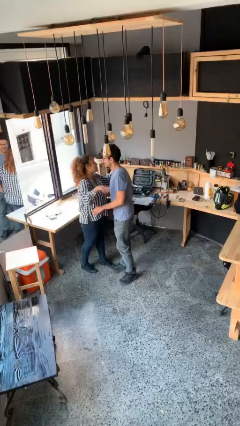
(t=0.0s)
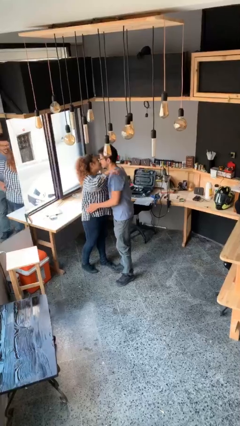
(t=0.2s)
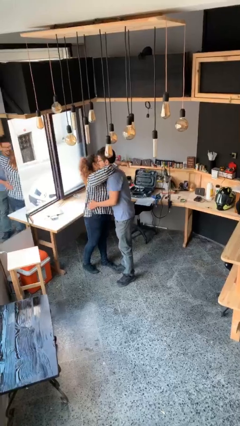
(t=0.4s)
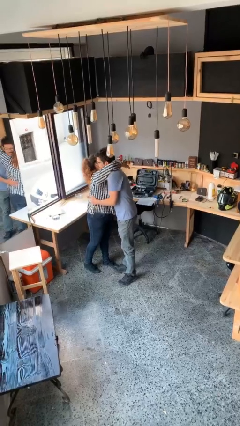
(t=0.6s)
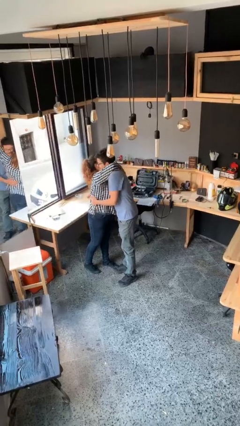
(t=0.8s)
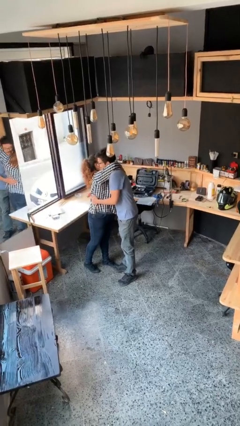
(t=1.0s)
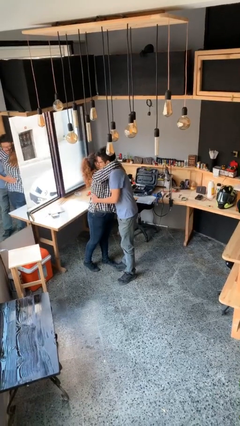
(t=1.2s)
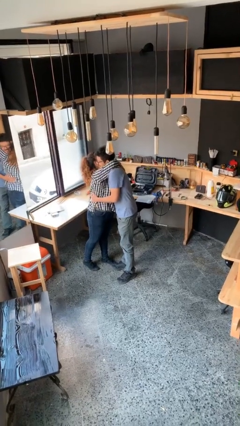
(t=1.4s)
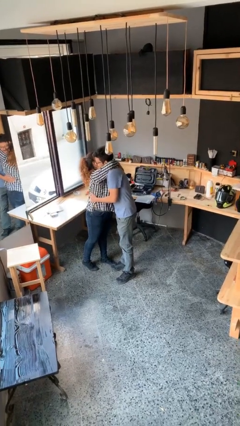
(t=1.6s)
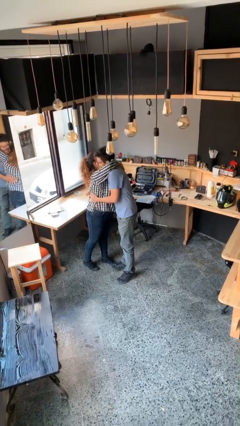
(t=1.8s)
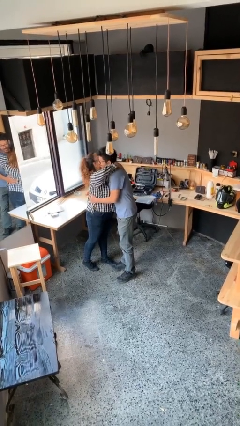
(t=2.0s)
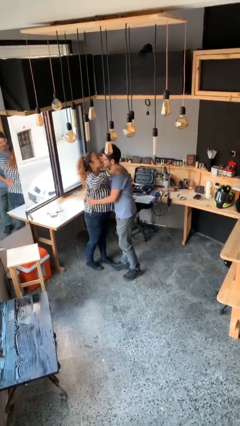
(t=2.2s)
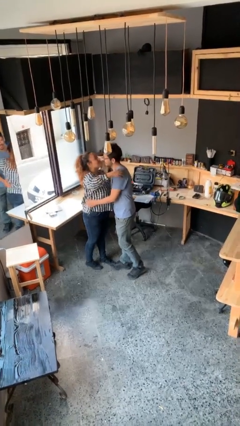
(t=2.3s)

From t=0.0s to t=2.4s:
person embraces person

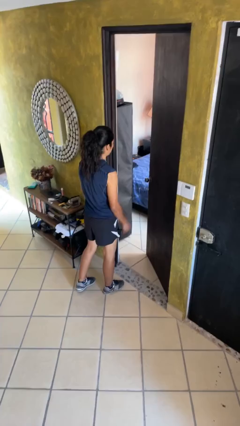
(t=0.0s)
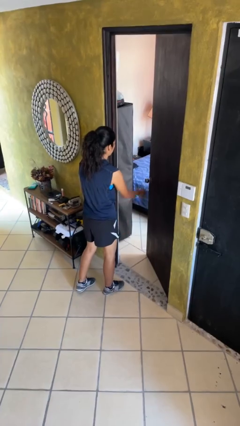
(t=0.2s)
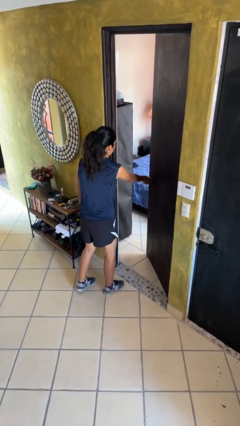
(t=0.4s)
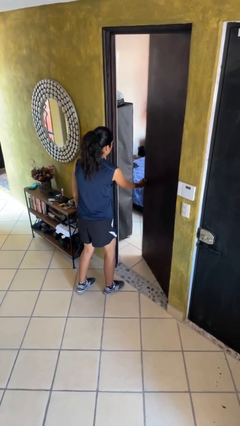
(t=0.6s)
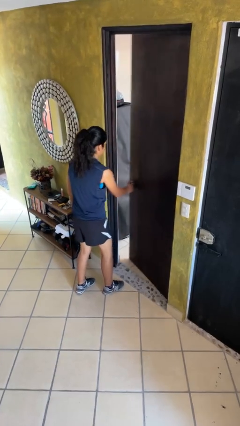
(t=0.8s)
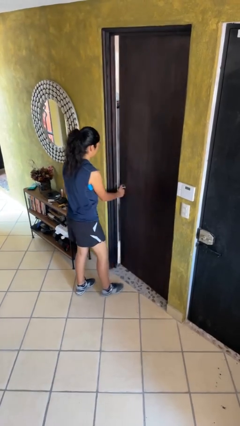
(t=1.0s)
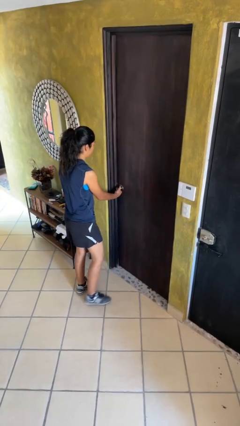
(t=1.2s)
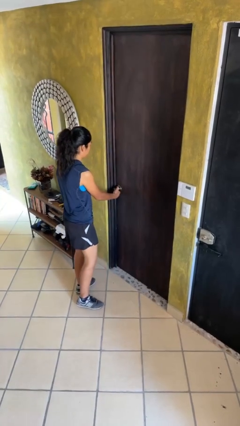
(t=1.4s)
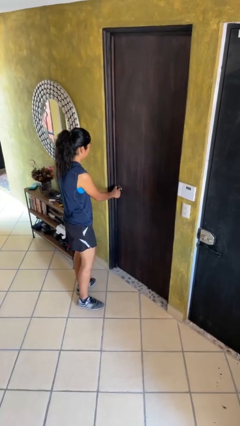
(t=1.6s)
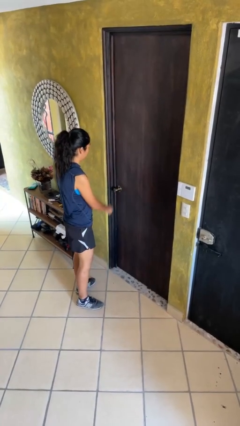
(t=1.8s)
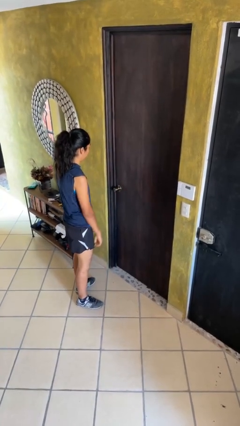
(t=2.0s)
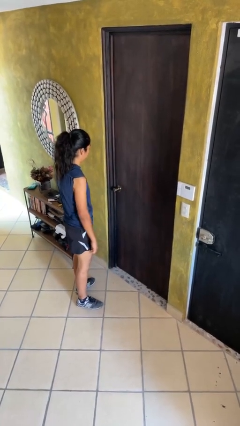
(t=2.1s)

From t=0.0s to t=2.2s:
person closes facility door

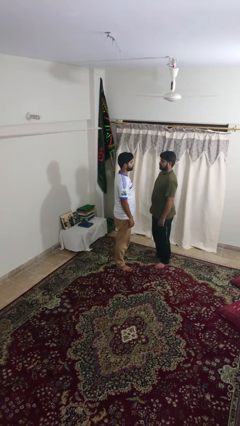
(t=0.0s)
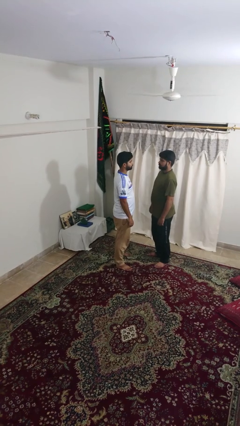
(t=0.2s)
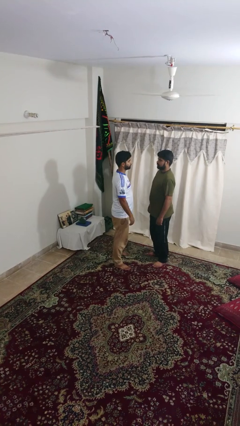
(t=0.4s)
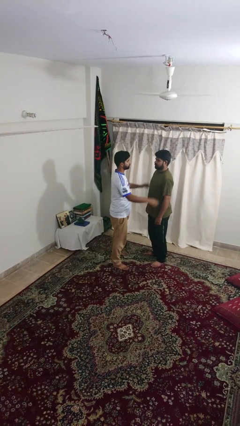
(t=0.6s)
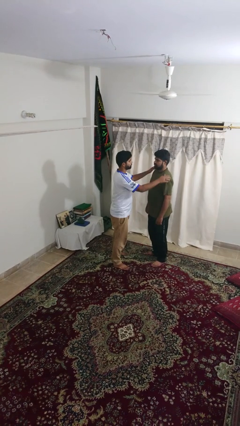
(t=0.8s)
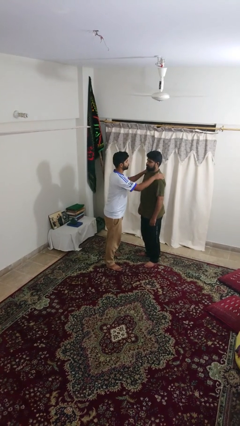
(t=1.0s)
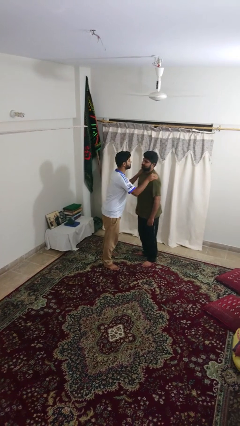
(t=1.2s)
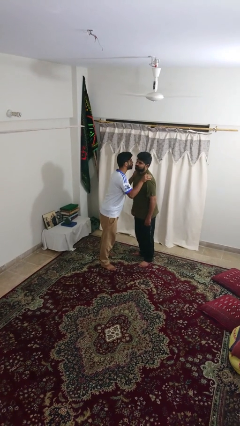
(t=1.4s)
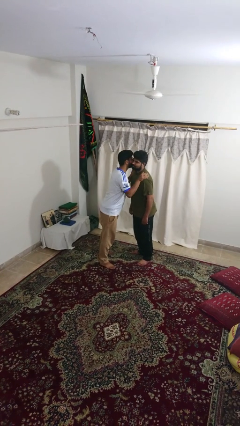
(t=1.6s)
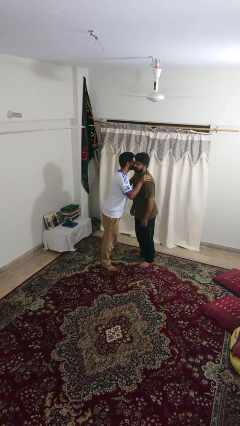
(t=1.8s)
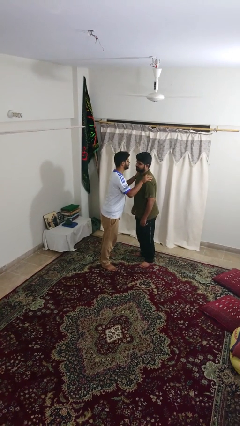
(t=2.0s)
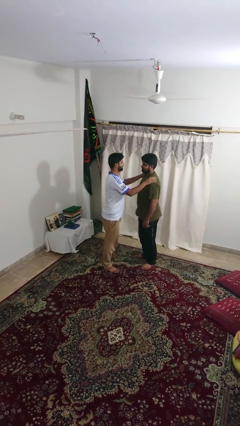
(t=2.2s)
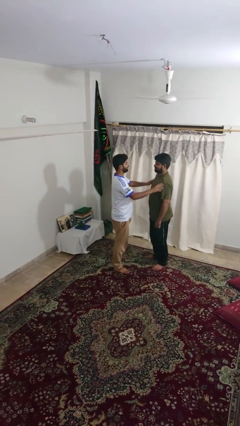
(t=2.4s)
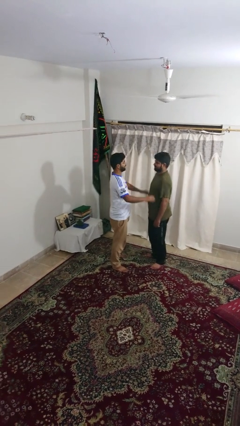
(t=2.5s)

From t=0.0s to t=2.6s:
person kisses cheek of person

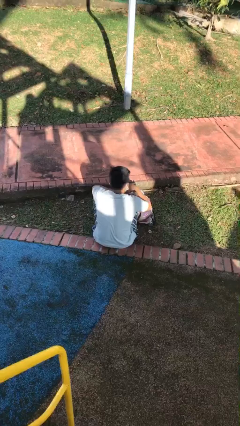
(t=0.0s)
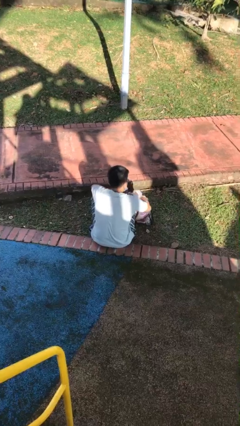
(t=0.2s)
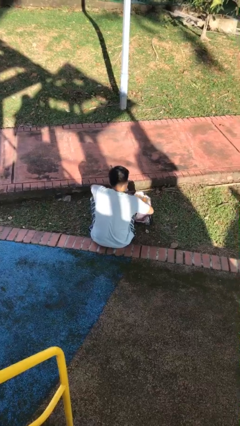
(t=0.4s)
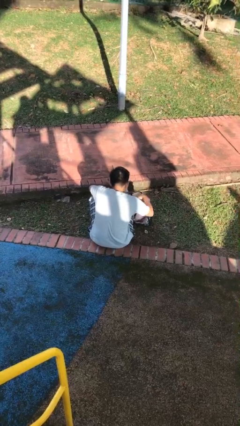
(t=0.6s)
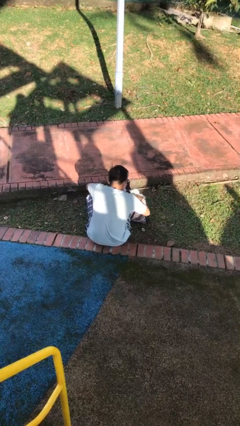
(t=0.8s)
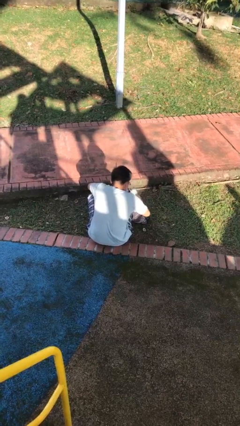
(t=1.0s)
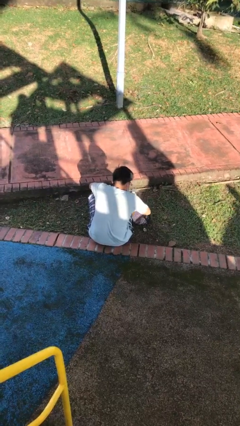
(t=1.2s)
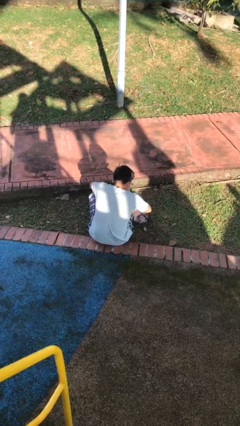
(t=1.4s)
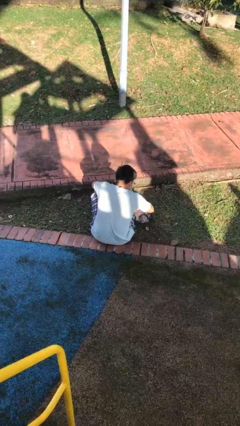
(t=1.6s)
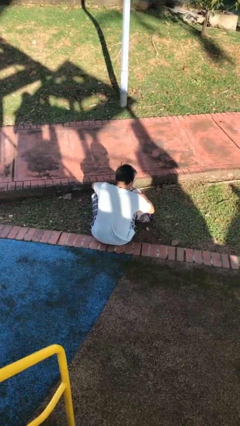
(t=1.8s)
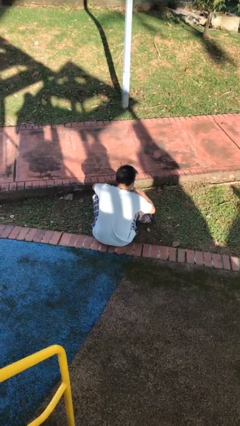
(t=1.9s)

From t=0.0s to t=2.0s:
person searches in bag

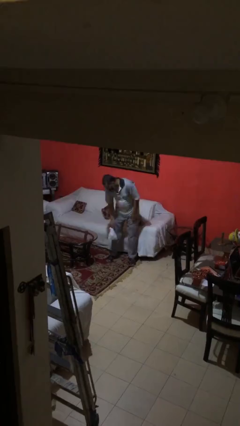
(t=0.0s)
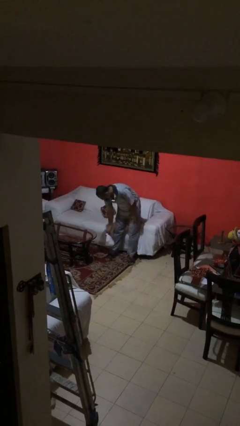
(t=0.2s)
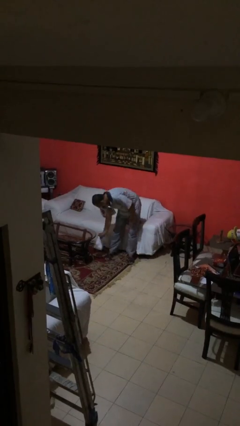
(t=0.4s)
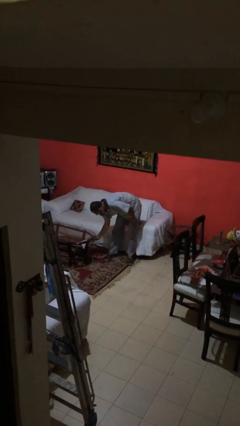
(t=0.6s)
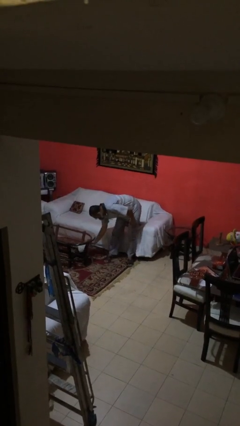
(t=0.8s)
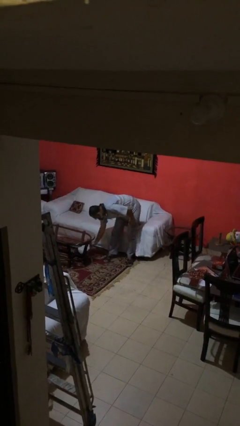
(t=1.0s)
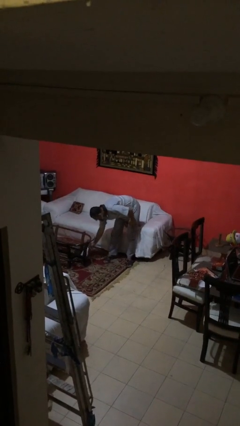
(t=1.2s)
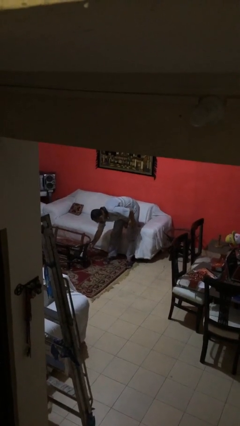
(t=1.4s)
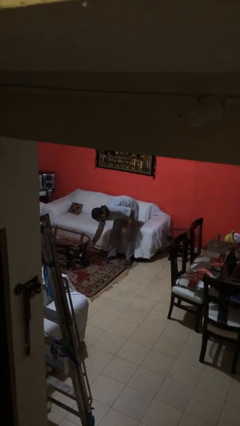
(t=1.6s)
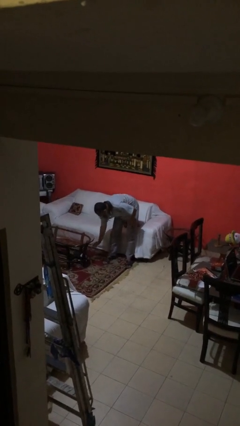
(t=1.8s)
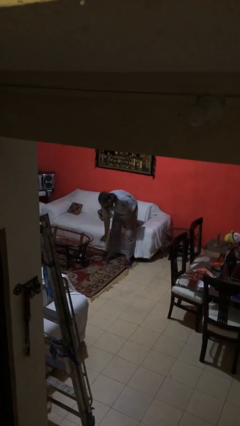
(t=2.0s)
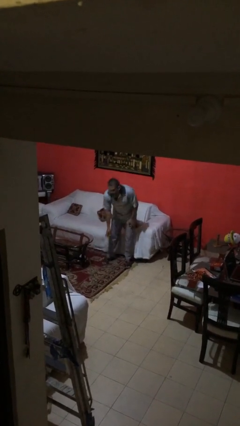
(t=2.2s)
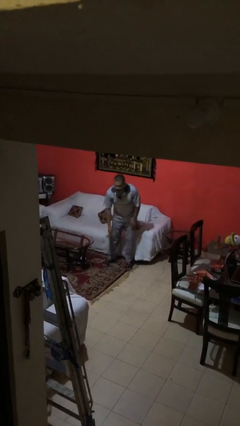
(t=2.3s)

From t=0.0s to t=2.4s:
person puts down object on table

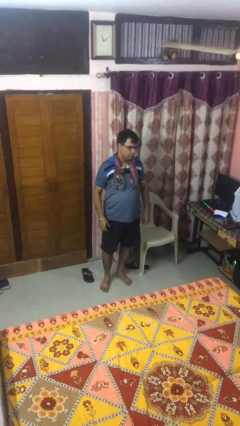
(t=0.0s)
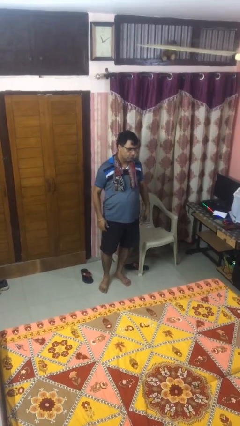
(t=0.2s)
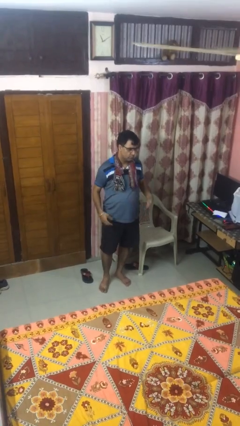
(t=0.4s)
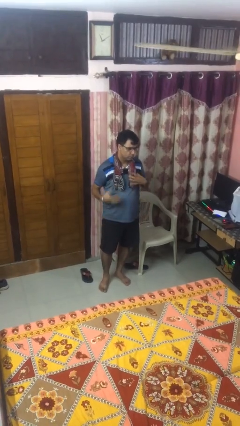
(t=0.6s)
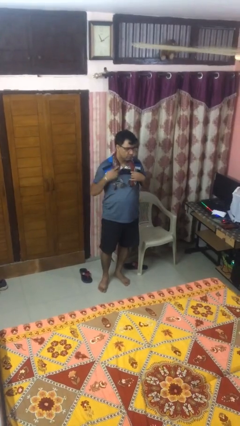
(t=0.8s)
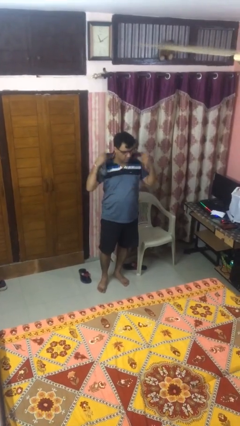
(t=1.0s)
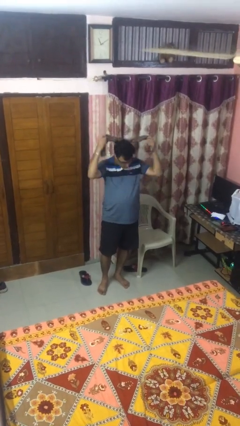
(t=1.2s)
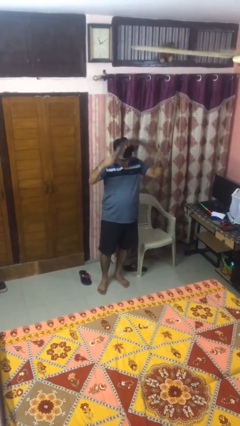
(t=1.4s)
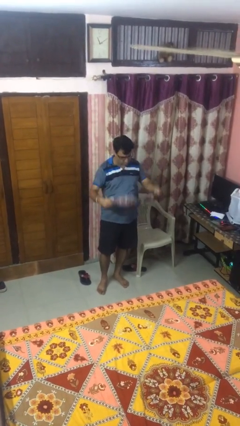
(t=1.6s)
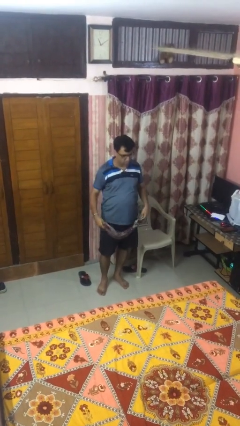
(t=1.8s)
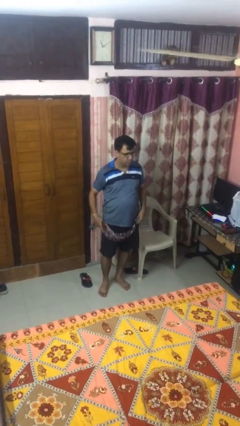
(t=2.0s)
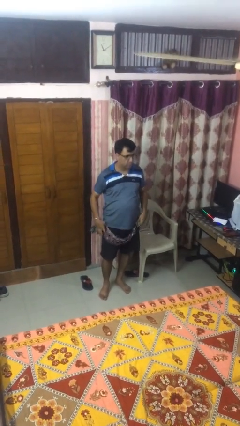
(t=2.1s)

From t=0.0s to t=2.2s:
person takes off scarf

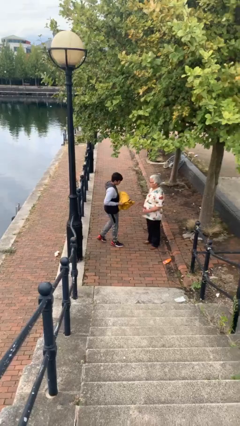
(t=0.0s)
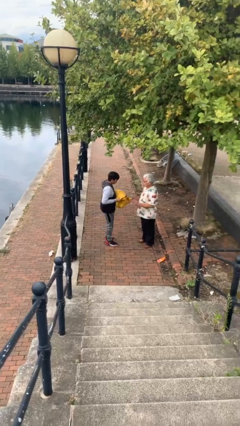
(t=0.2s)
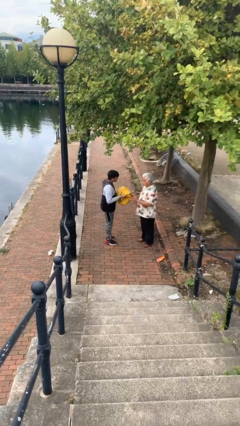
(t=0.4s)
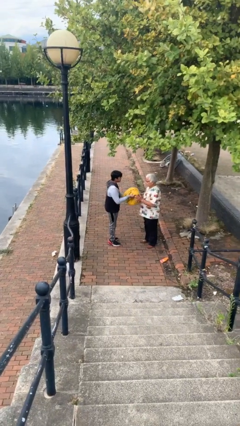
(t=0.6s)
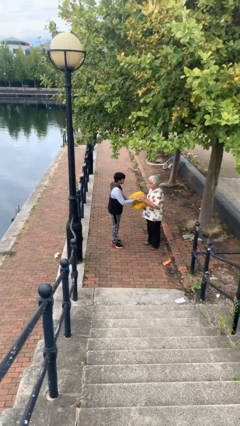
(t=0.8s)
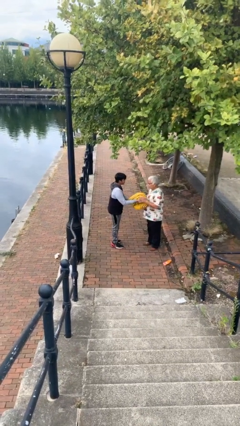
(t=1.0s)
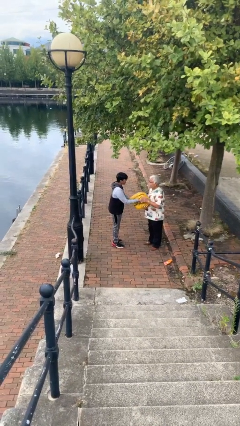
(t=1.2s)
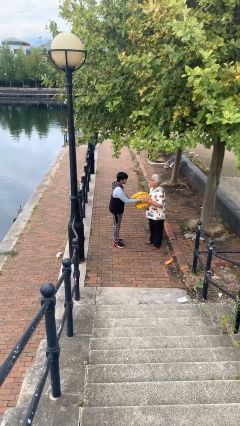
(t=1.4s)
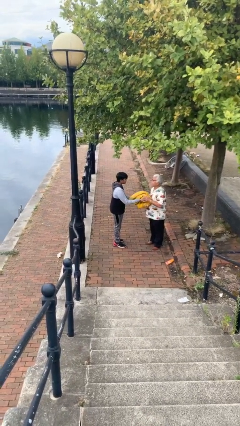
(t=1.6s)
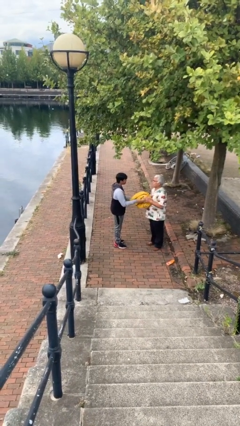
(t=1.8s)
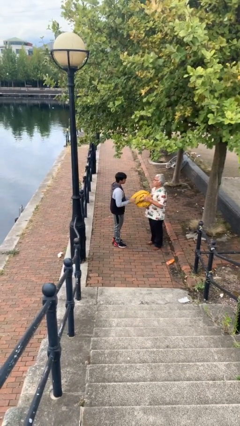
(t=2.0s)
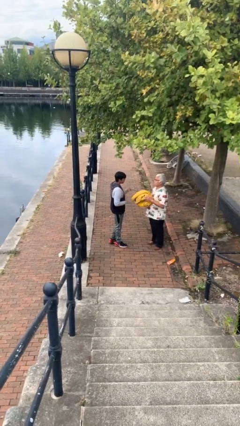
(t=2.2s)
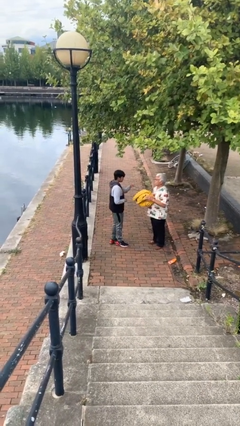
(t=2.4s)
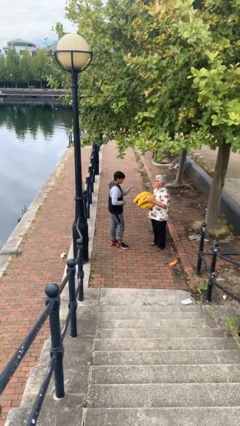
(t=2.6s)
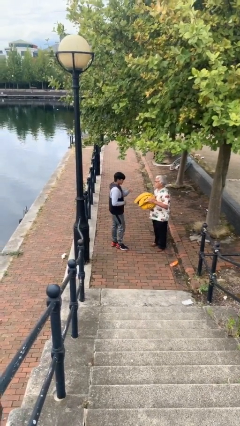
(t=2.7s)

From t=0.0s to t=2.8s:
person transfers object to person

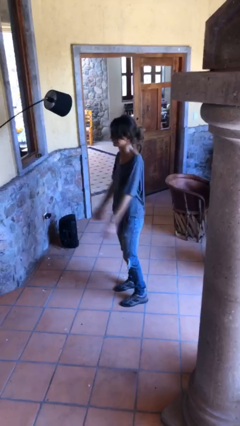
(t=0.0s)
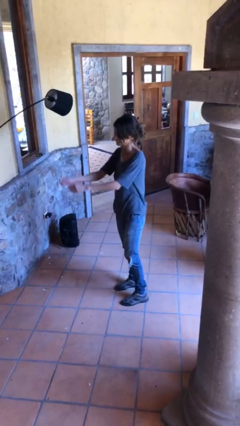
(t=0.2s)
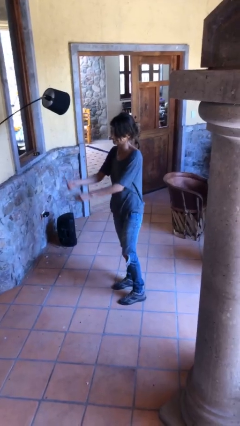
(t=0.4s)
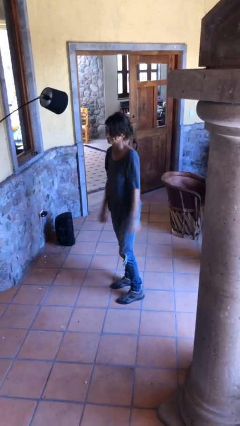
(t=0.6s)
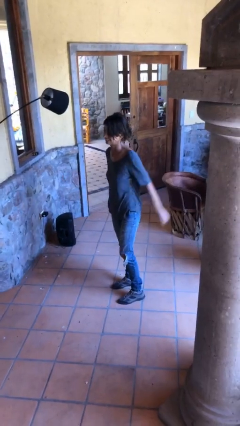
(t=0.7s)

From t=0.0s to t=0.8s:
person jumps
